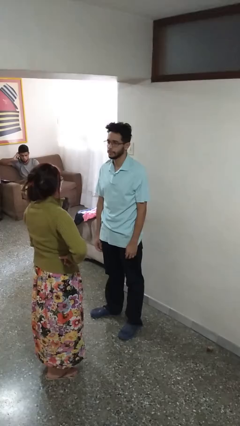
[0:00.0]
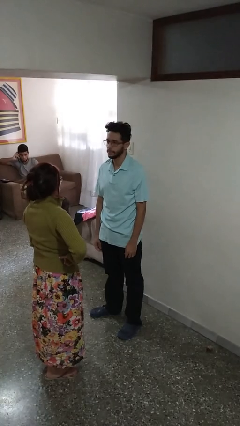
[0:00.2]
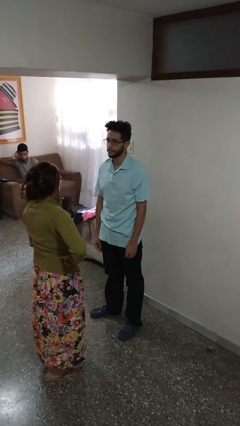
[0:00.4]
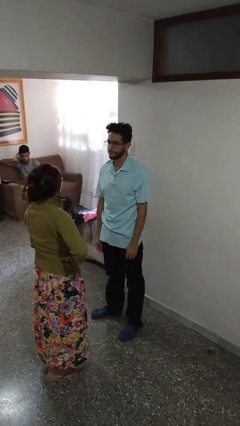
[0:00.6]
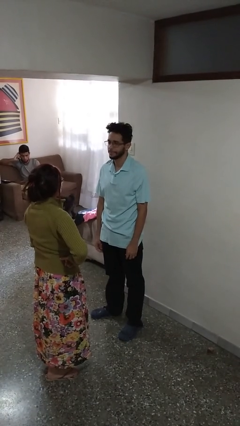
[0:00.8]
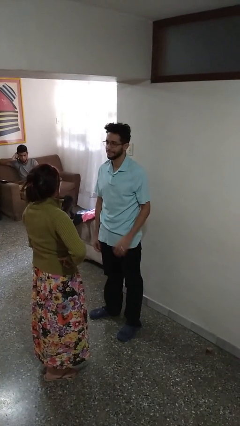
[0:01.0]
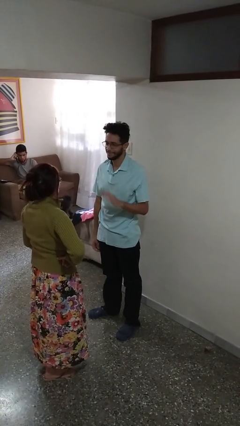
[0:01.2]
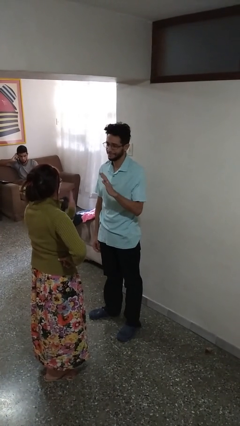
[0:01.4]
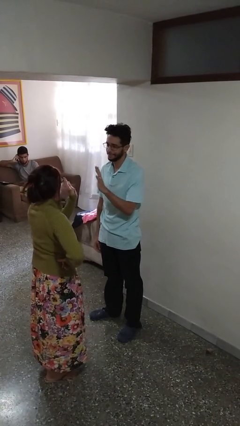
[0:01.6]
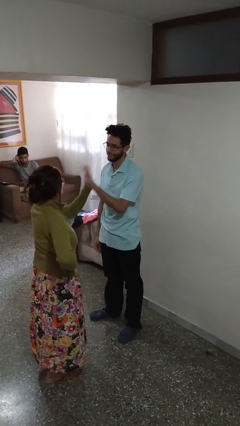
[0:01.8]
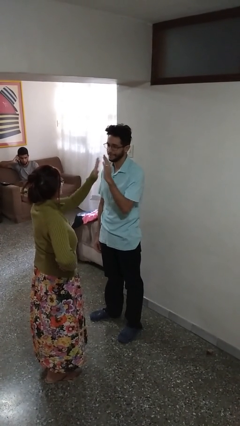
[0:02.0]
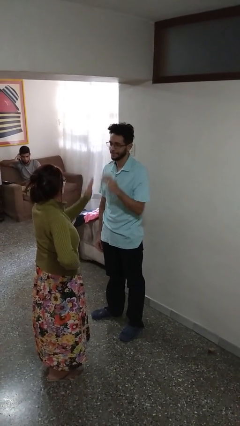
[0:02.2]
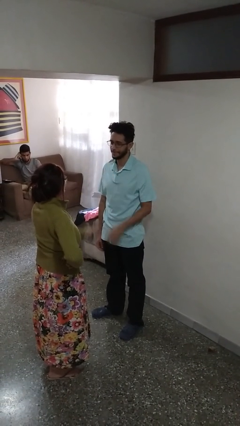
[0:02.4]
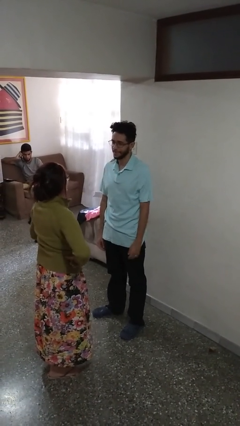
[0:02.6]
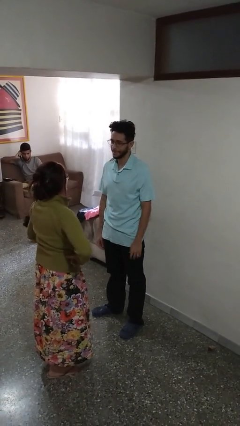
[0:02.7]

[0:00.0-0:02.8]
person highfives hand

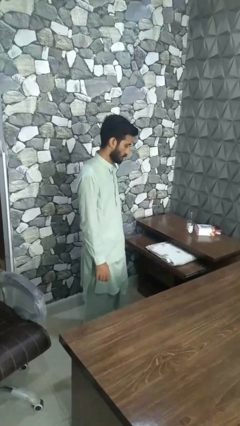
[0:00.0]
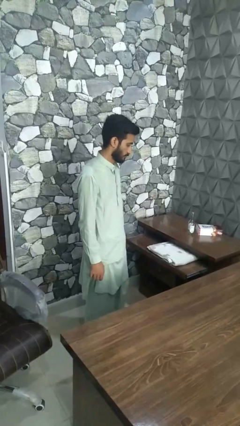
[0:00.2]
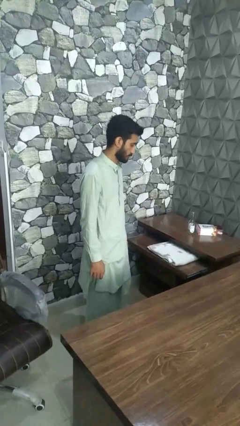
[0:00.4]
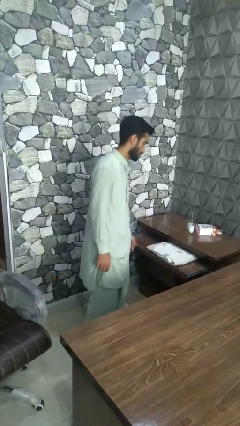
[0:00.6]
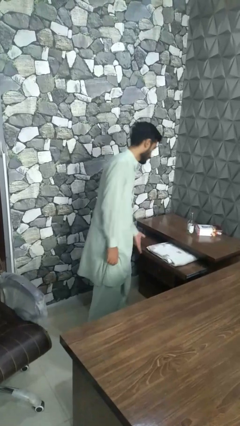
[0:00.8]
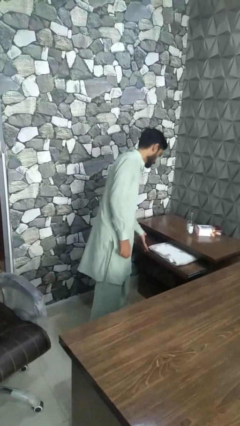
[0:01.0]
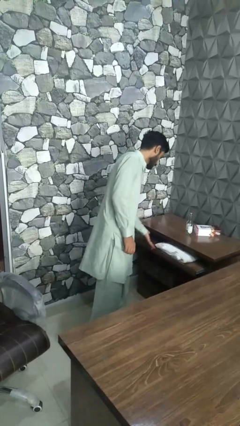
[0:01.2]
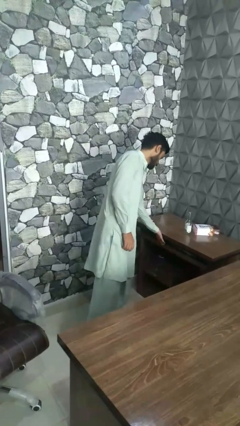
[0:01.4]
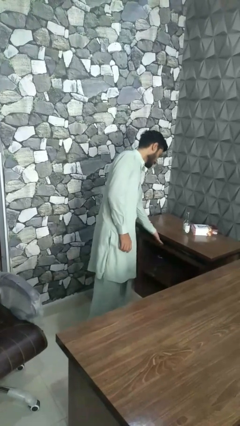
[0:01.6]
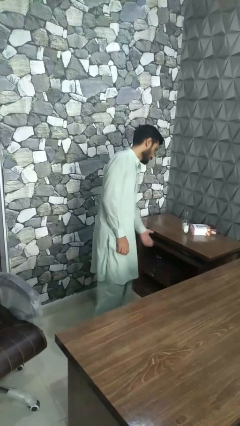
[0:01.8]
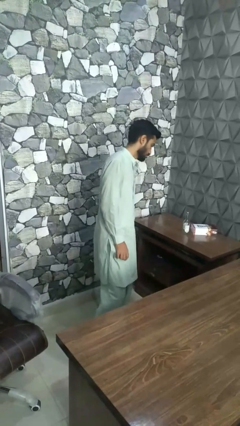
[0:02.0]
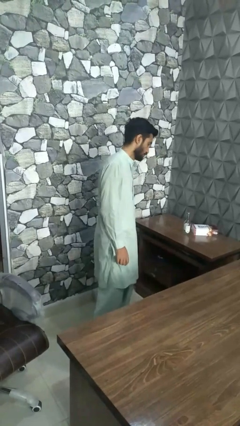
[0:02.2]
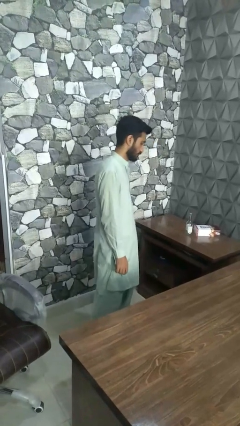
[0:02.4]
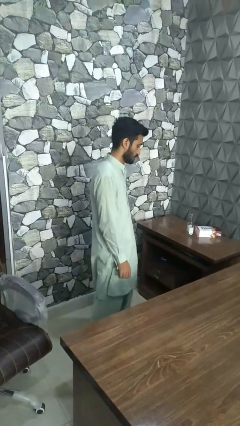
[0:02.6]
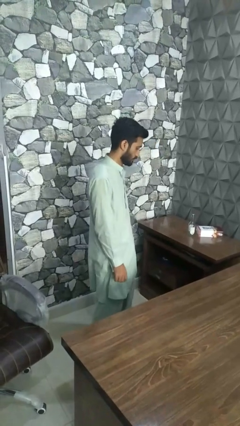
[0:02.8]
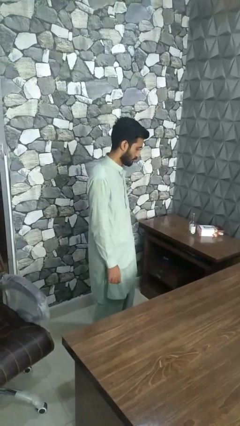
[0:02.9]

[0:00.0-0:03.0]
person closes dresser drawer

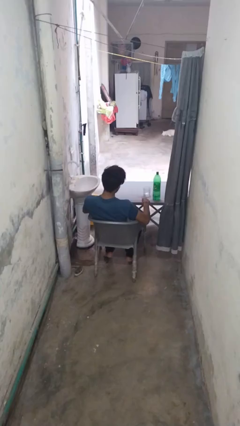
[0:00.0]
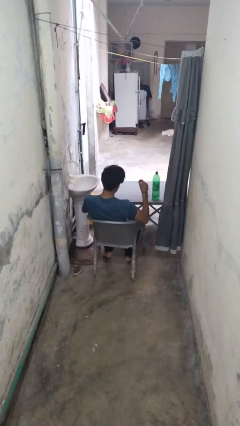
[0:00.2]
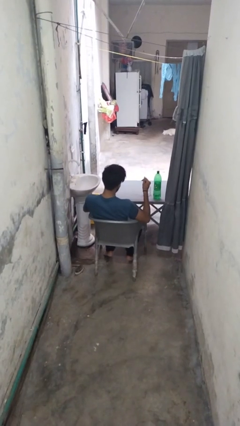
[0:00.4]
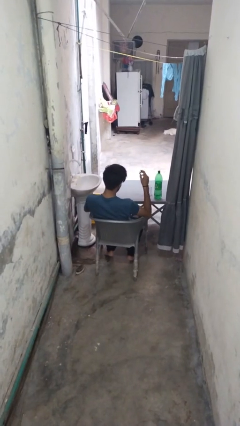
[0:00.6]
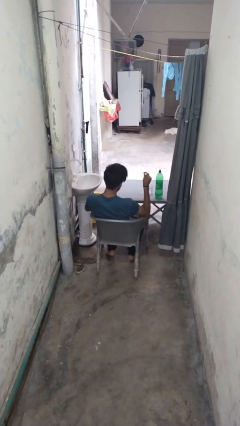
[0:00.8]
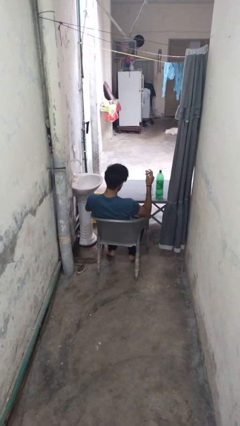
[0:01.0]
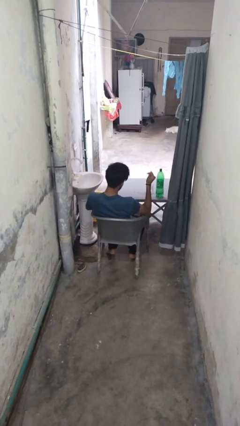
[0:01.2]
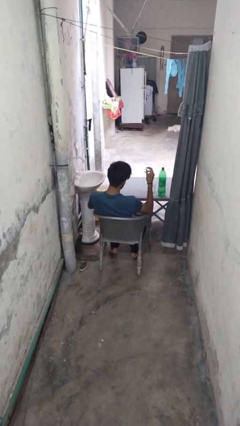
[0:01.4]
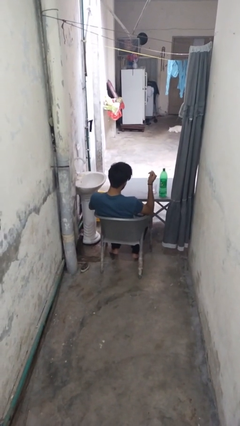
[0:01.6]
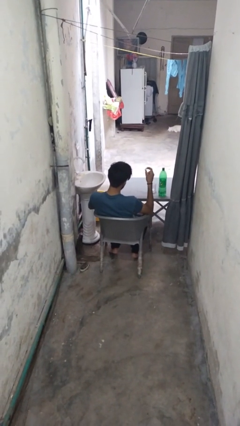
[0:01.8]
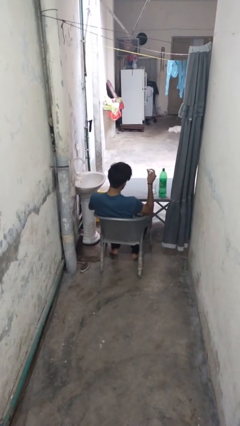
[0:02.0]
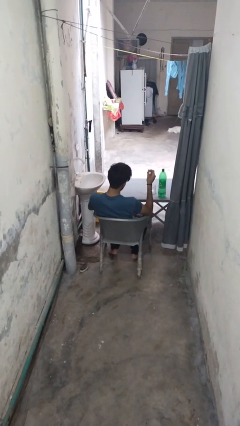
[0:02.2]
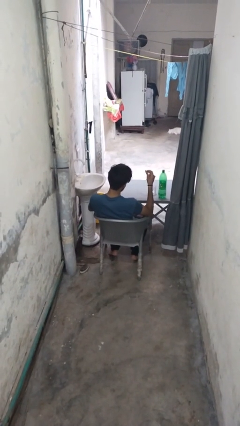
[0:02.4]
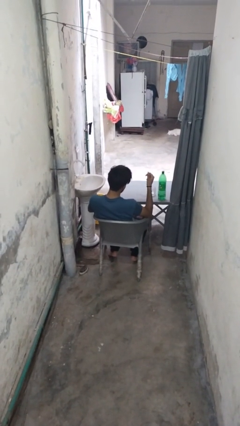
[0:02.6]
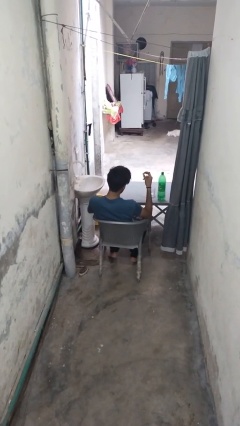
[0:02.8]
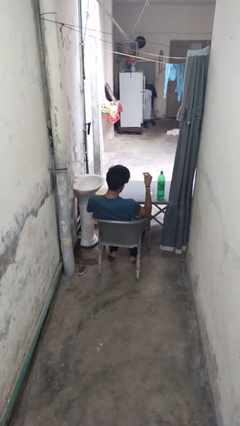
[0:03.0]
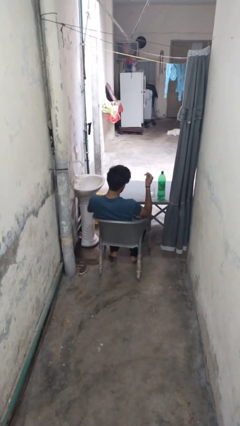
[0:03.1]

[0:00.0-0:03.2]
person snaps fingers

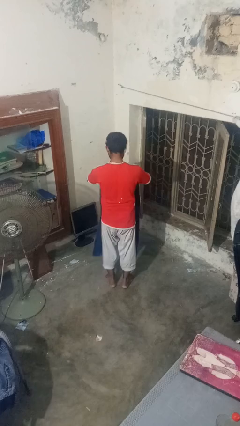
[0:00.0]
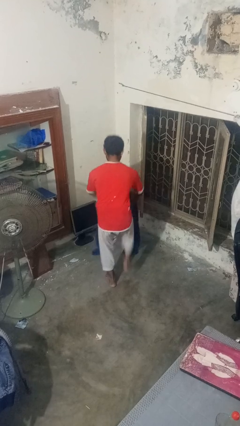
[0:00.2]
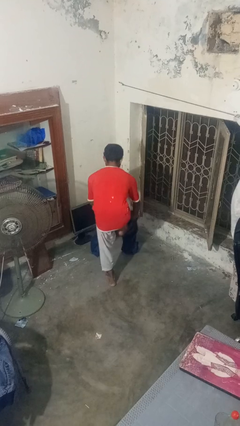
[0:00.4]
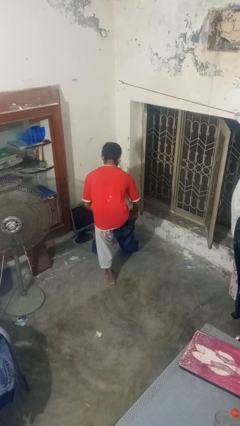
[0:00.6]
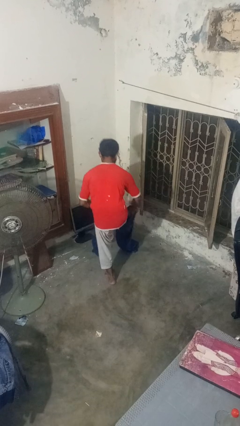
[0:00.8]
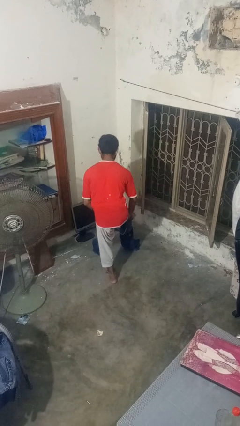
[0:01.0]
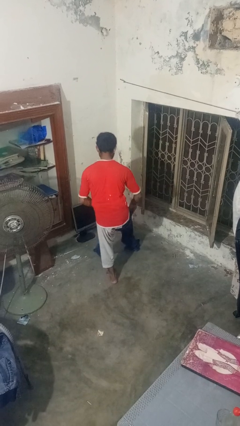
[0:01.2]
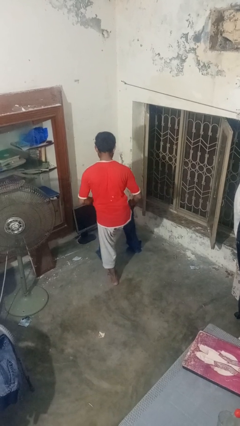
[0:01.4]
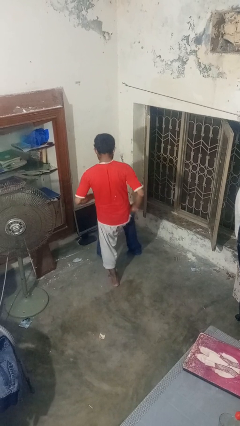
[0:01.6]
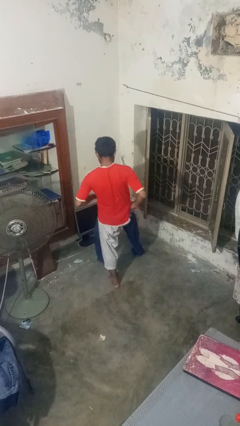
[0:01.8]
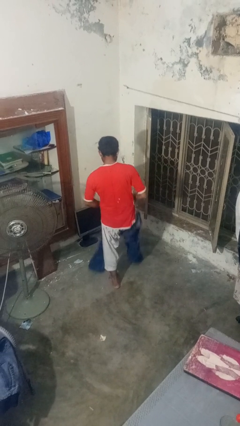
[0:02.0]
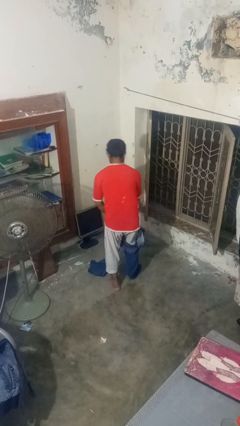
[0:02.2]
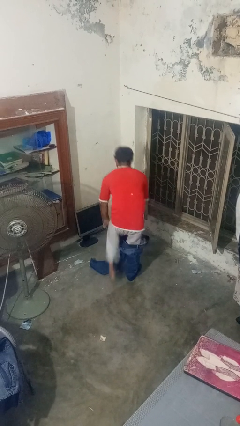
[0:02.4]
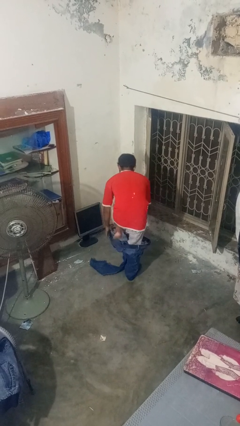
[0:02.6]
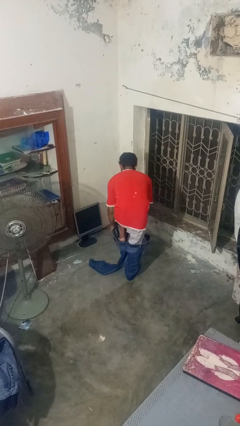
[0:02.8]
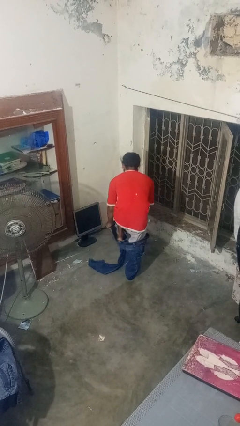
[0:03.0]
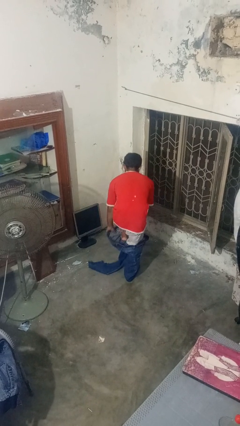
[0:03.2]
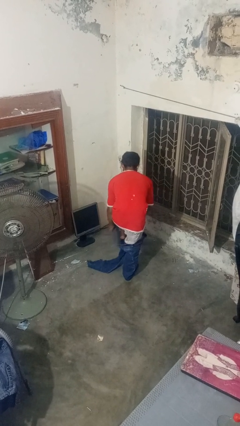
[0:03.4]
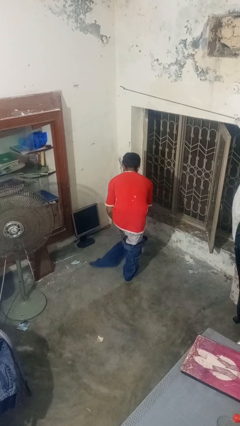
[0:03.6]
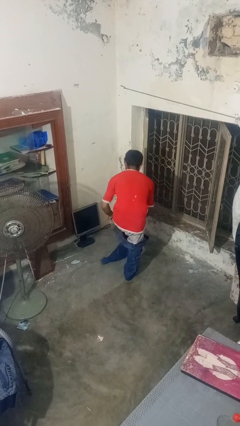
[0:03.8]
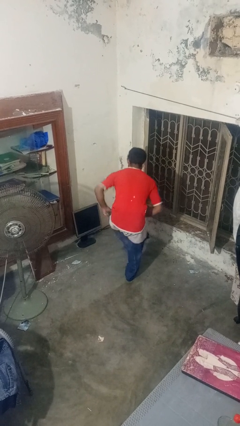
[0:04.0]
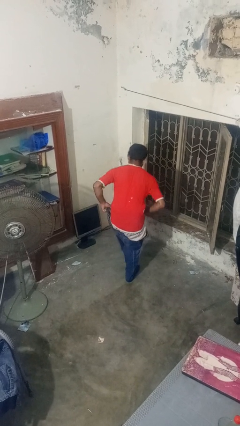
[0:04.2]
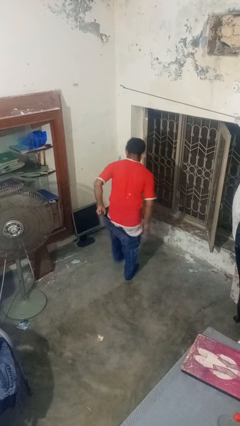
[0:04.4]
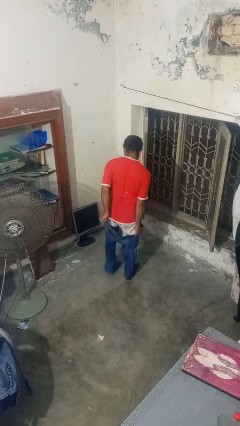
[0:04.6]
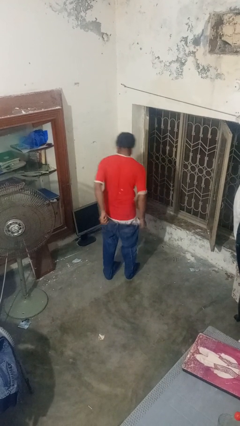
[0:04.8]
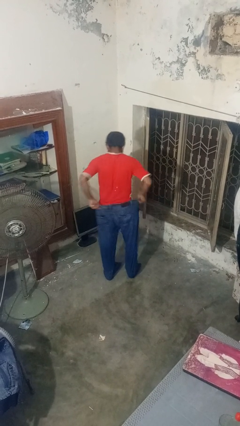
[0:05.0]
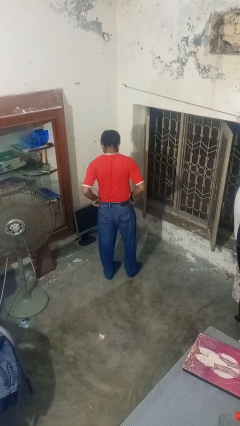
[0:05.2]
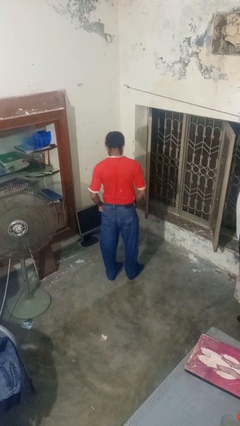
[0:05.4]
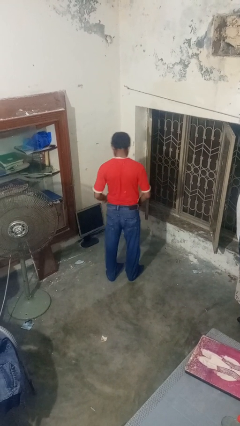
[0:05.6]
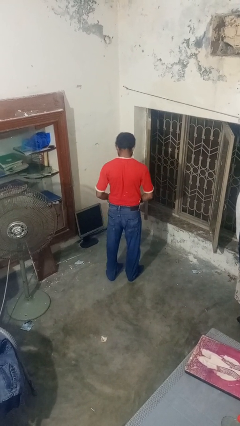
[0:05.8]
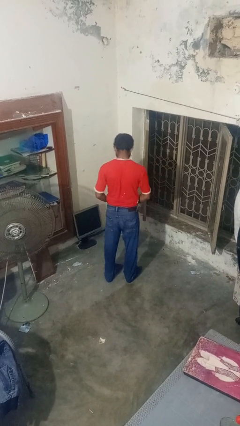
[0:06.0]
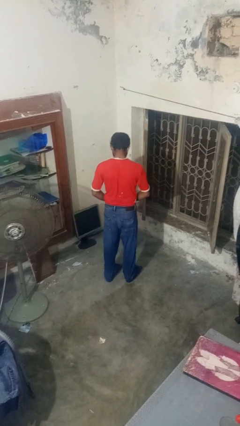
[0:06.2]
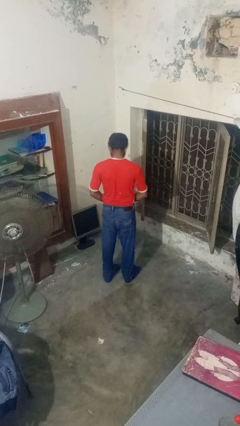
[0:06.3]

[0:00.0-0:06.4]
person puts on pants

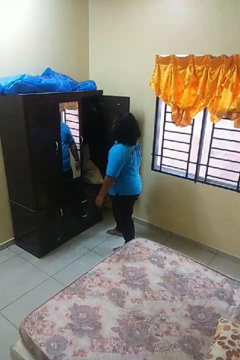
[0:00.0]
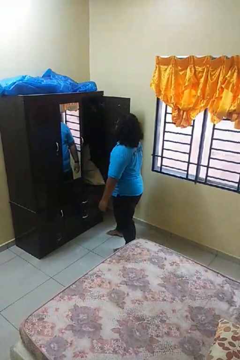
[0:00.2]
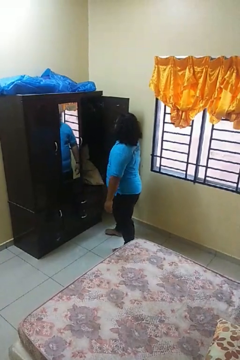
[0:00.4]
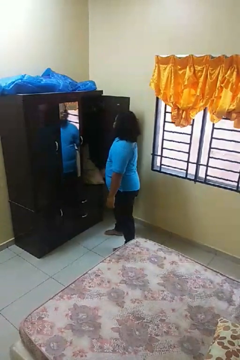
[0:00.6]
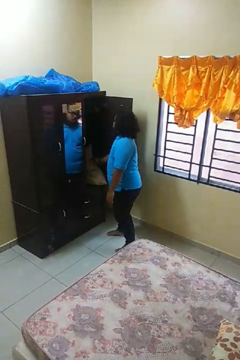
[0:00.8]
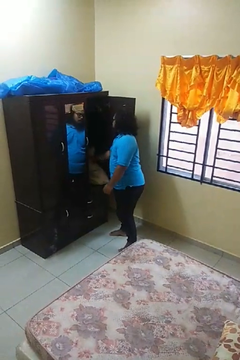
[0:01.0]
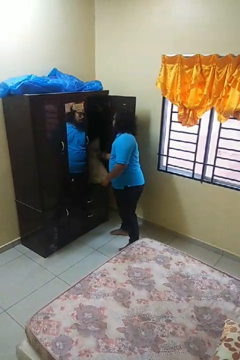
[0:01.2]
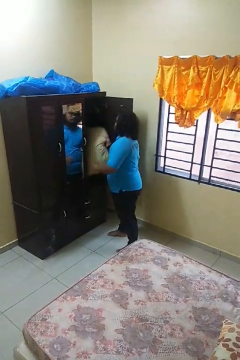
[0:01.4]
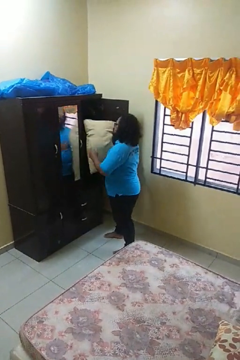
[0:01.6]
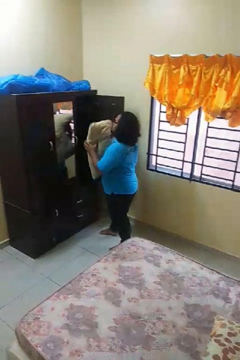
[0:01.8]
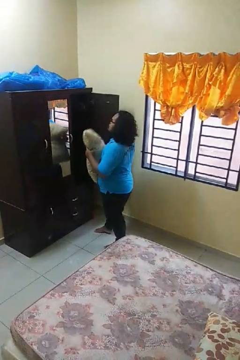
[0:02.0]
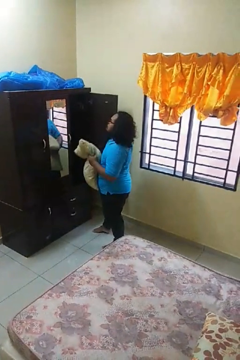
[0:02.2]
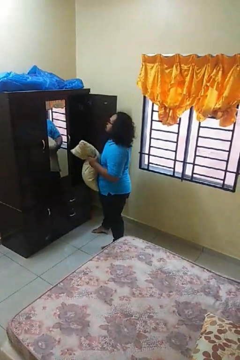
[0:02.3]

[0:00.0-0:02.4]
person picks up object from cabinet

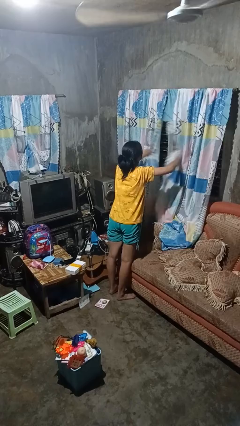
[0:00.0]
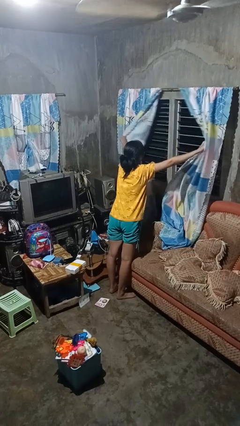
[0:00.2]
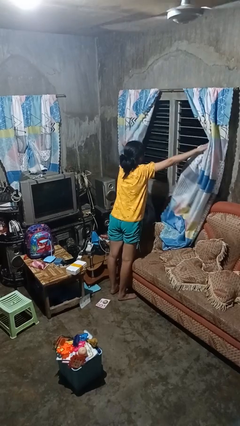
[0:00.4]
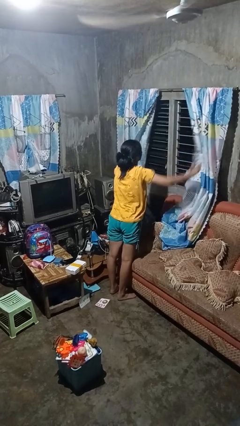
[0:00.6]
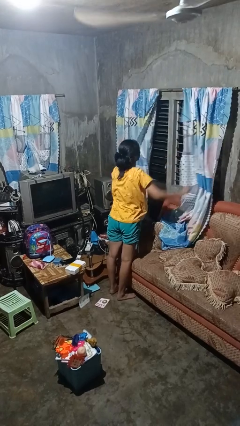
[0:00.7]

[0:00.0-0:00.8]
person opens curtains
